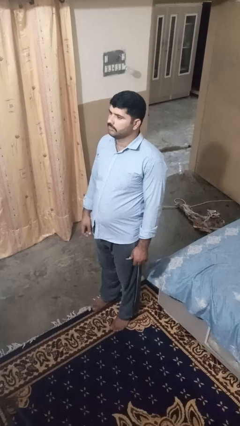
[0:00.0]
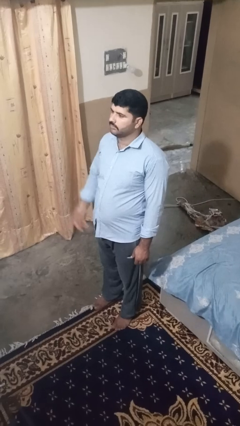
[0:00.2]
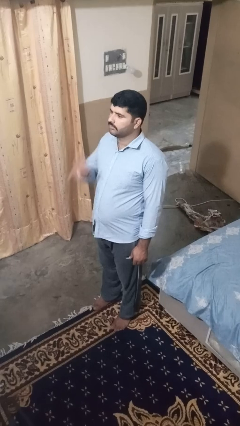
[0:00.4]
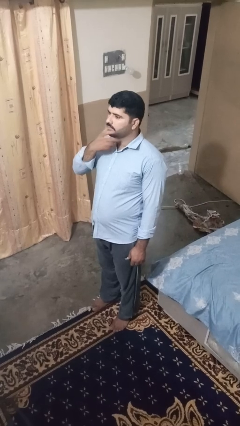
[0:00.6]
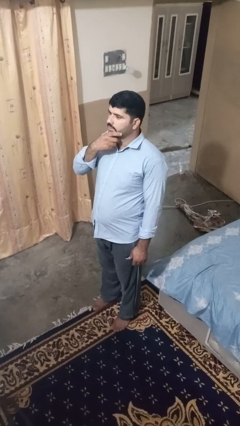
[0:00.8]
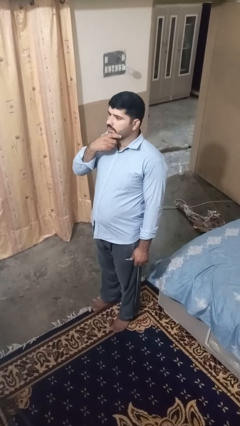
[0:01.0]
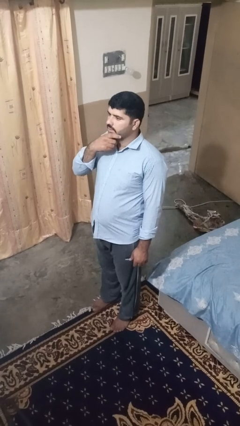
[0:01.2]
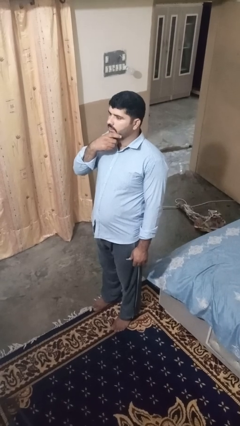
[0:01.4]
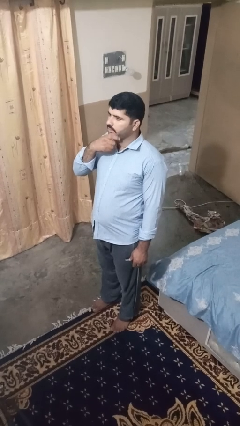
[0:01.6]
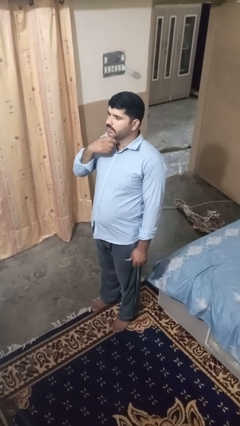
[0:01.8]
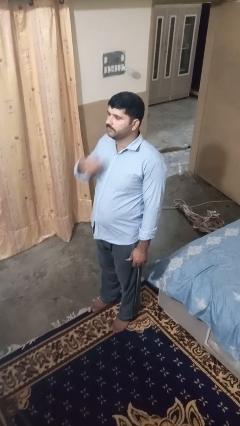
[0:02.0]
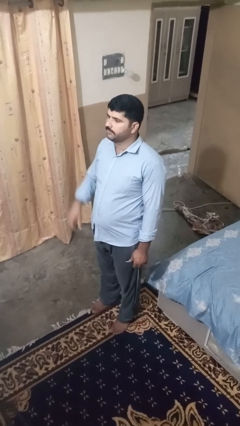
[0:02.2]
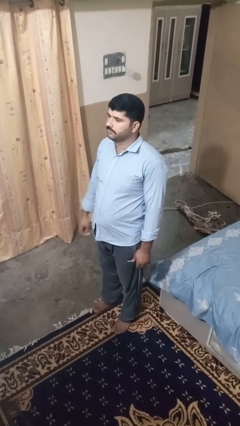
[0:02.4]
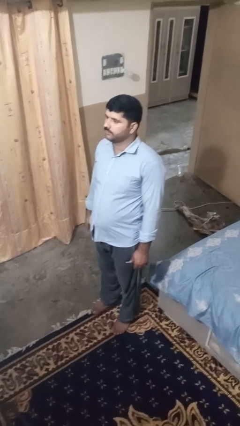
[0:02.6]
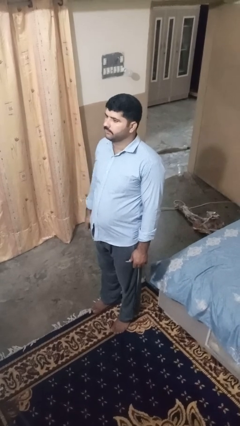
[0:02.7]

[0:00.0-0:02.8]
person strokes chin

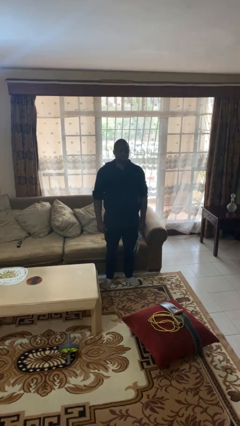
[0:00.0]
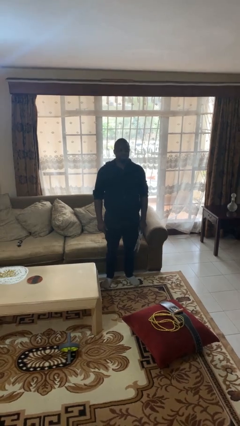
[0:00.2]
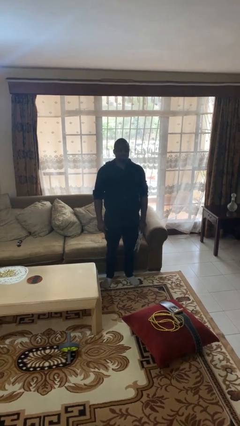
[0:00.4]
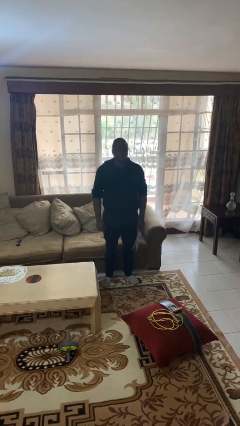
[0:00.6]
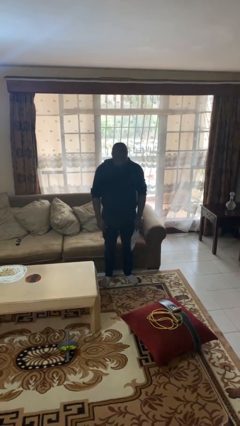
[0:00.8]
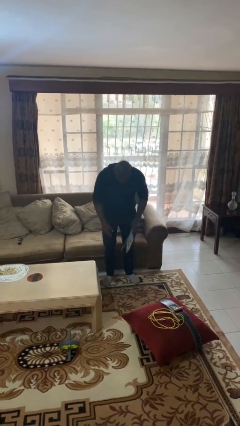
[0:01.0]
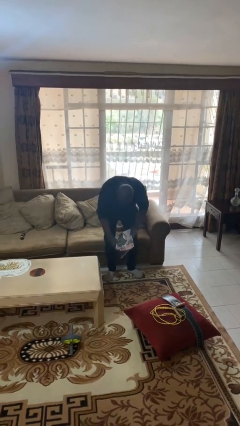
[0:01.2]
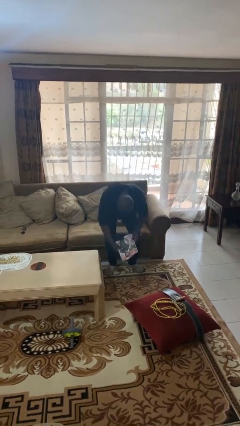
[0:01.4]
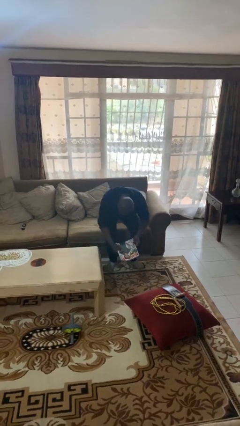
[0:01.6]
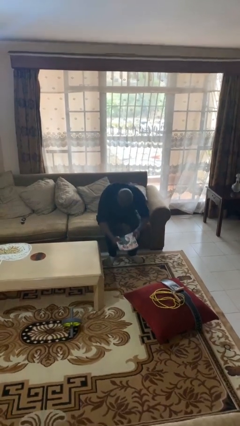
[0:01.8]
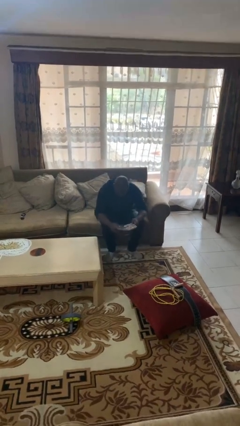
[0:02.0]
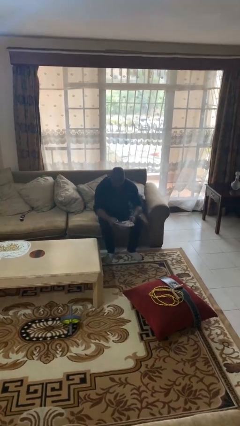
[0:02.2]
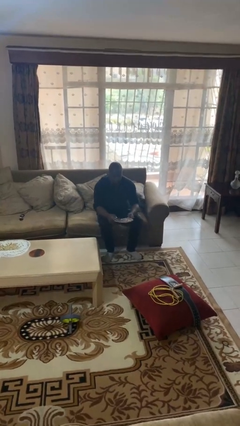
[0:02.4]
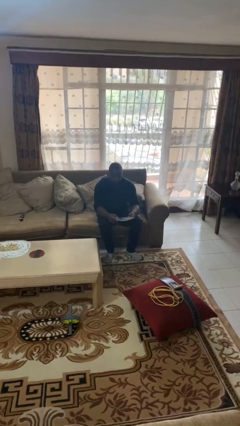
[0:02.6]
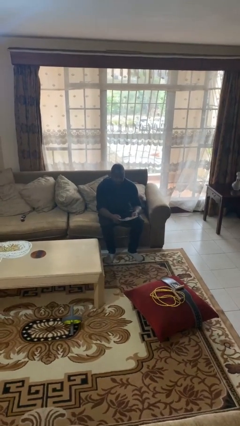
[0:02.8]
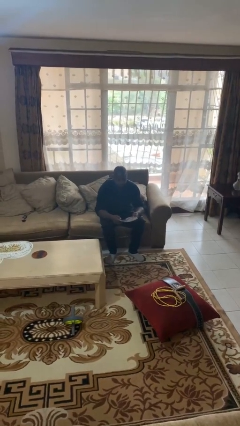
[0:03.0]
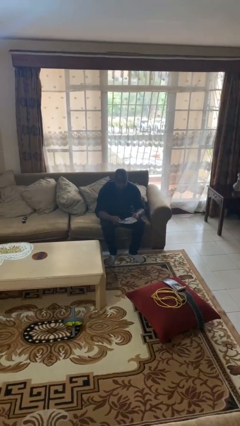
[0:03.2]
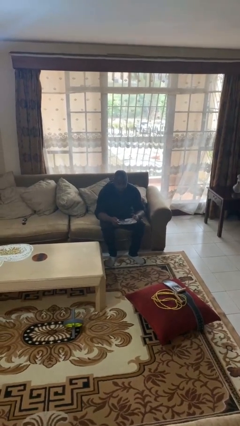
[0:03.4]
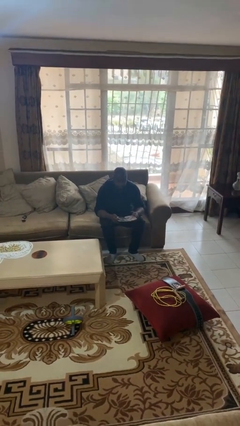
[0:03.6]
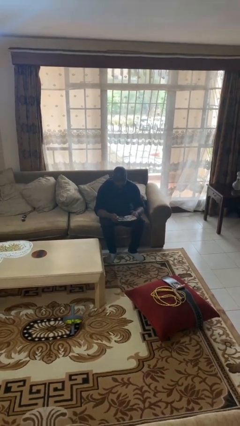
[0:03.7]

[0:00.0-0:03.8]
person sits down

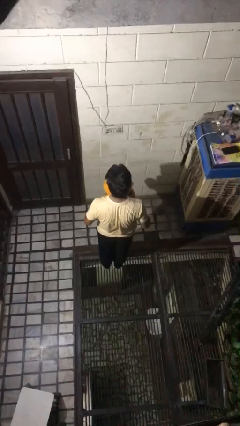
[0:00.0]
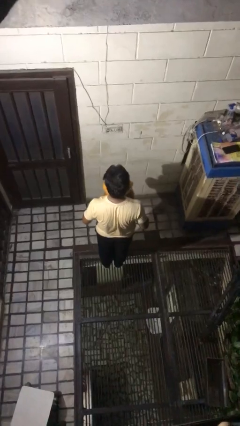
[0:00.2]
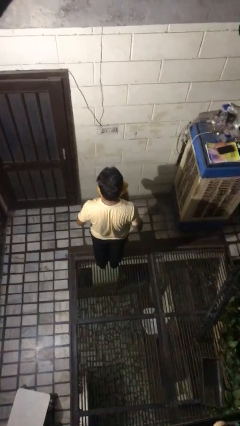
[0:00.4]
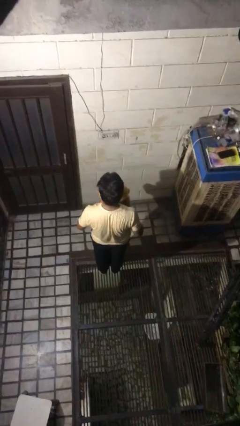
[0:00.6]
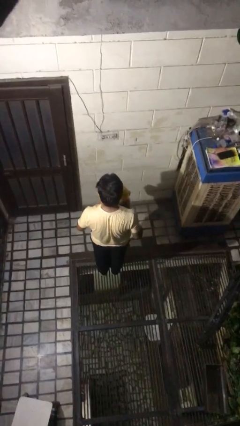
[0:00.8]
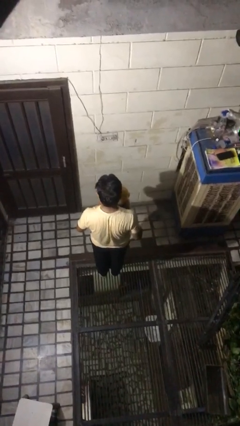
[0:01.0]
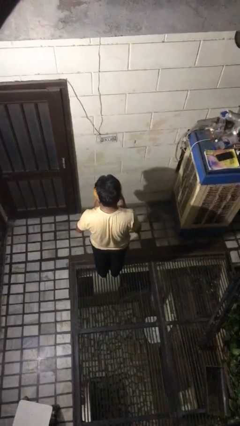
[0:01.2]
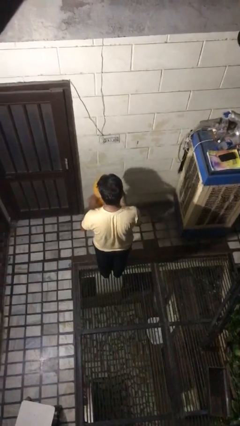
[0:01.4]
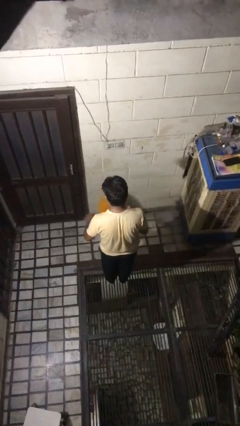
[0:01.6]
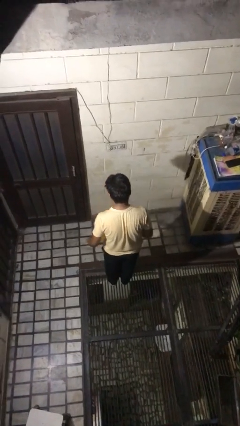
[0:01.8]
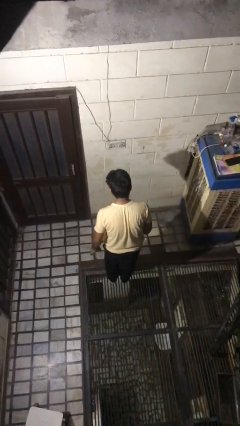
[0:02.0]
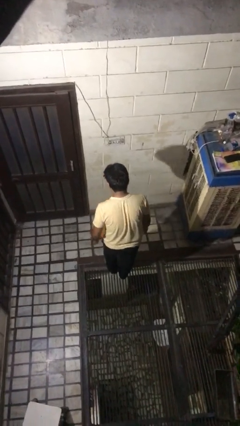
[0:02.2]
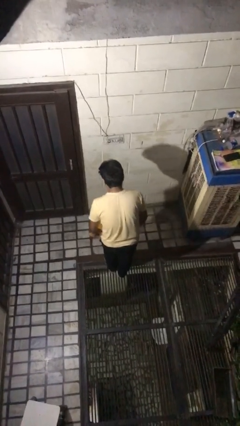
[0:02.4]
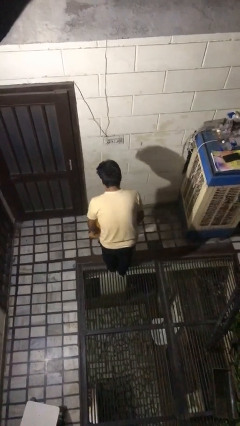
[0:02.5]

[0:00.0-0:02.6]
person throws object into air

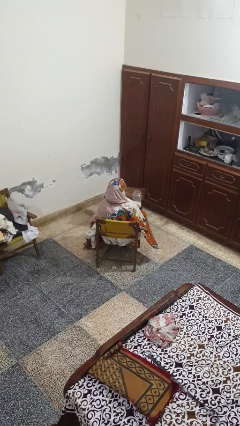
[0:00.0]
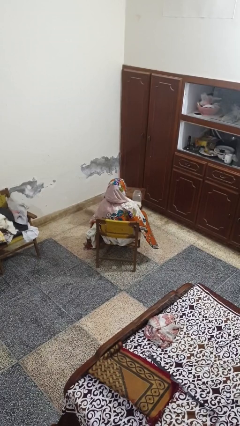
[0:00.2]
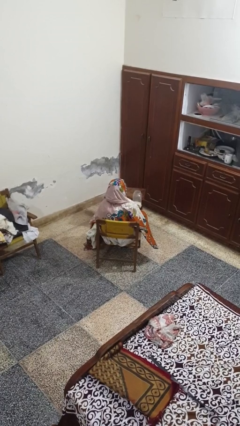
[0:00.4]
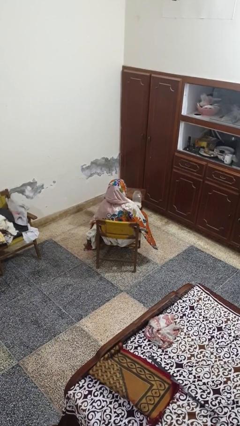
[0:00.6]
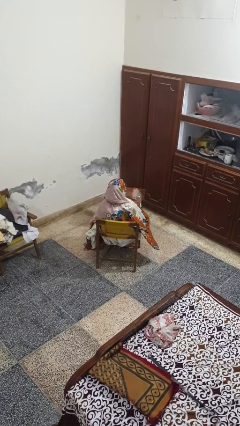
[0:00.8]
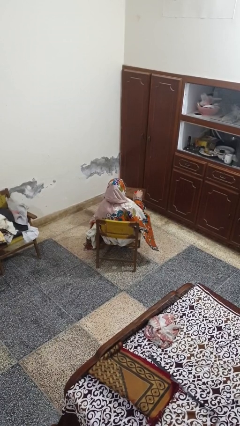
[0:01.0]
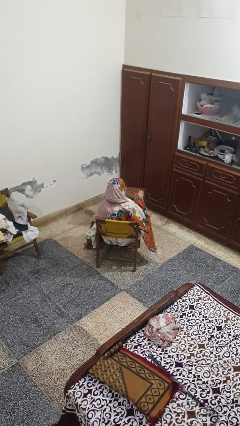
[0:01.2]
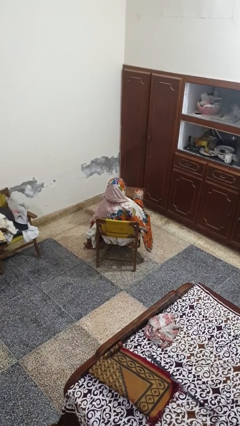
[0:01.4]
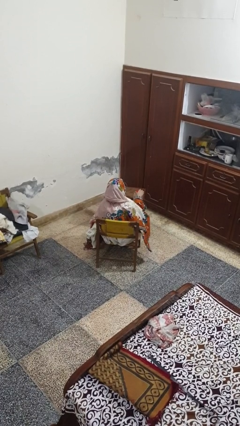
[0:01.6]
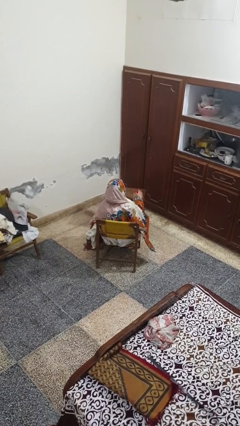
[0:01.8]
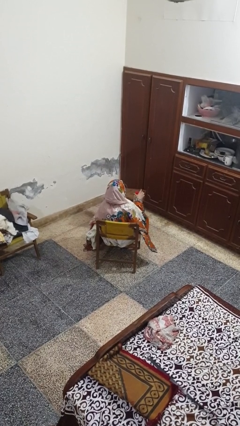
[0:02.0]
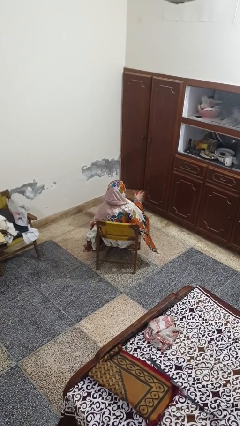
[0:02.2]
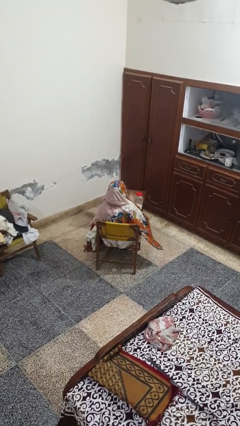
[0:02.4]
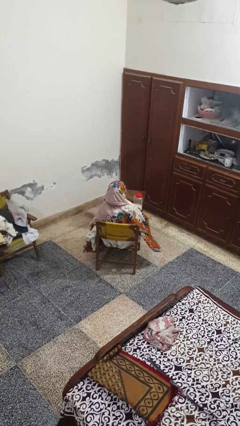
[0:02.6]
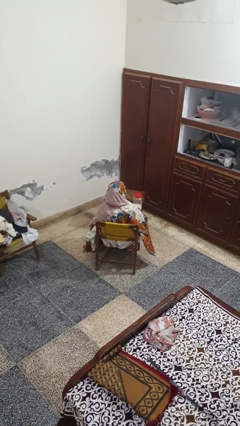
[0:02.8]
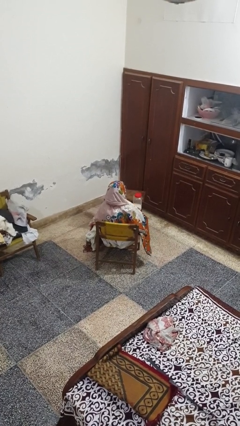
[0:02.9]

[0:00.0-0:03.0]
person closes jar

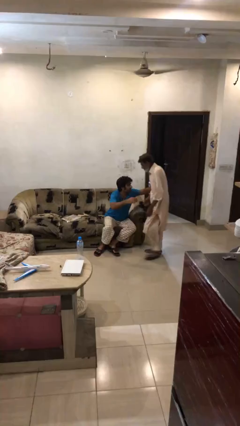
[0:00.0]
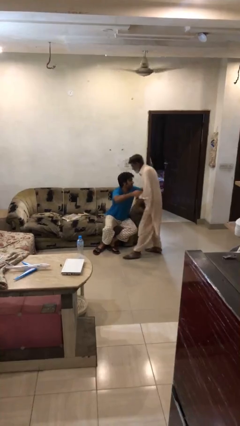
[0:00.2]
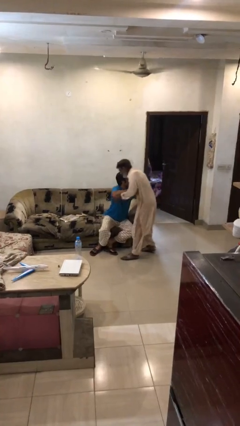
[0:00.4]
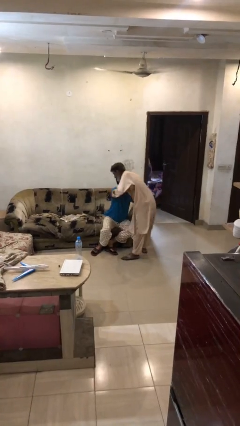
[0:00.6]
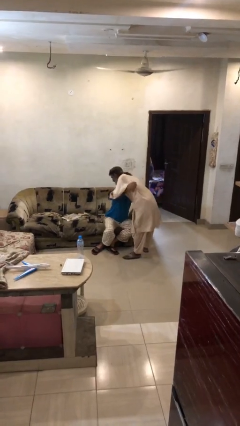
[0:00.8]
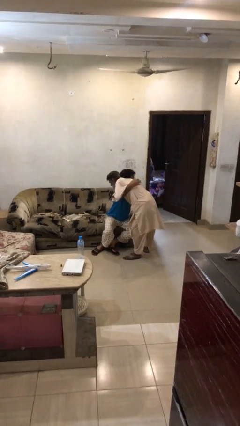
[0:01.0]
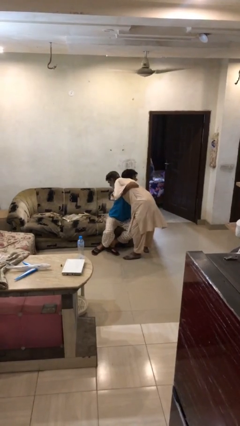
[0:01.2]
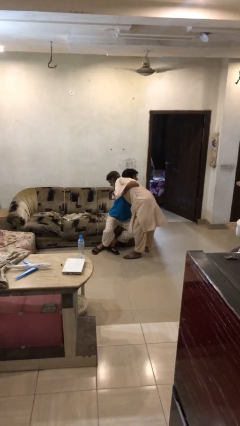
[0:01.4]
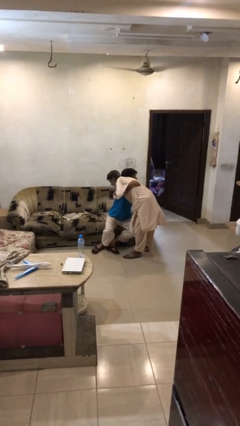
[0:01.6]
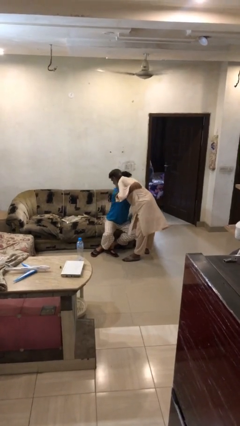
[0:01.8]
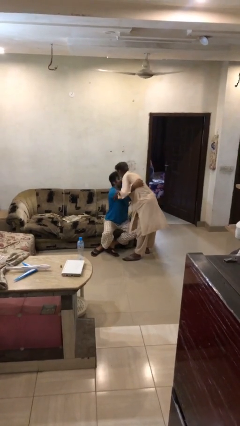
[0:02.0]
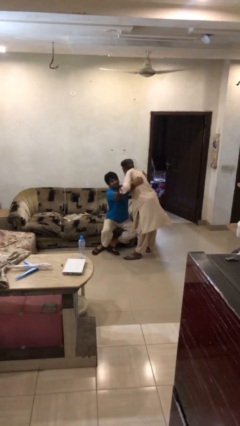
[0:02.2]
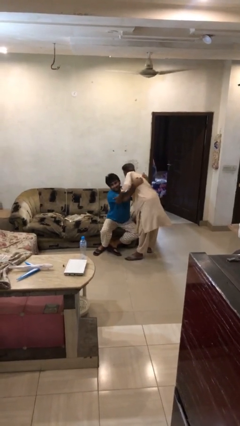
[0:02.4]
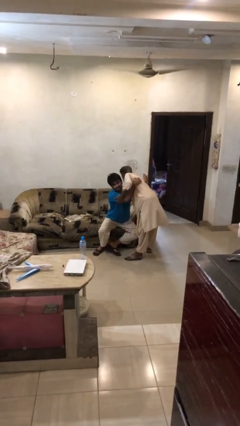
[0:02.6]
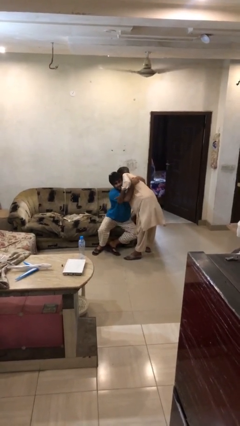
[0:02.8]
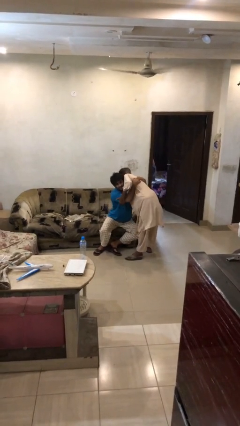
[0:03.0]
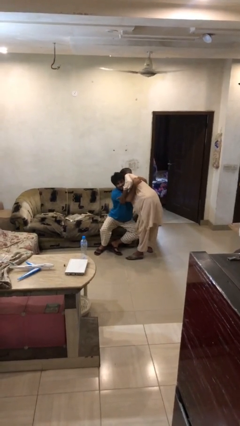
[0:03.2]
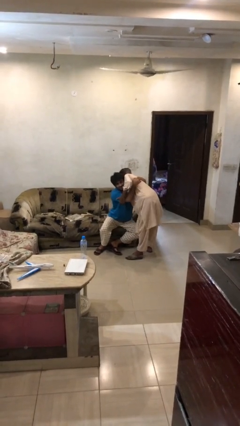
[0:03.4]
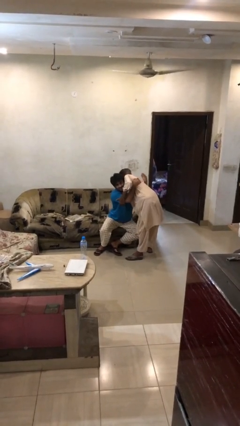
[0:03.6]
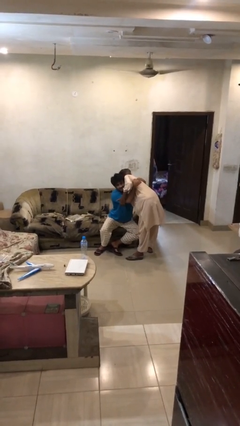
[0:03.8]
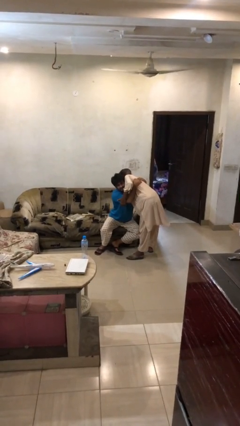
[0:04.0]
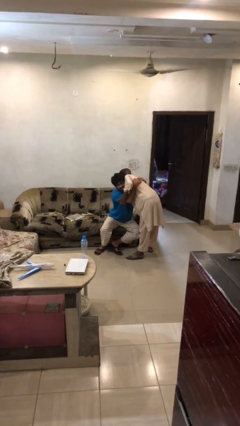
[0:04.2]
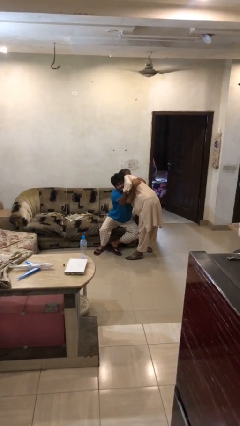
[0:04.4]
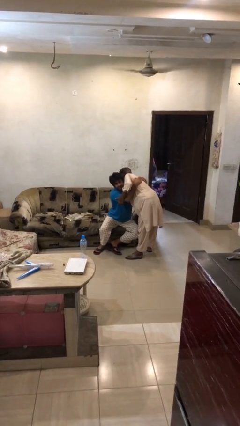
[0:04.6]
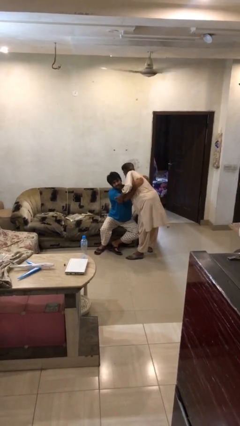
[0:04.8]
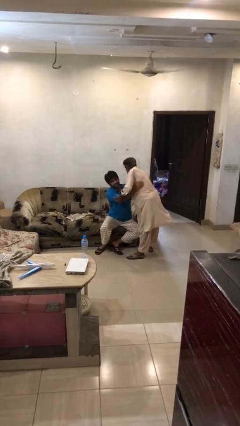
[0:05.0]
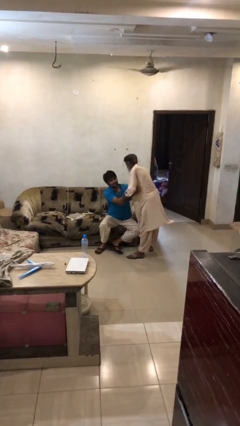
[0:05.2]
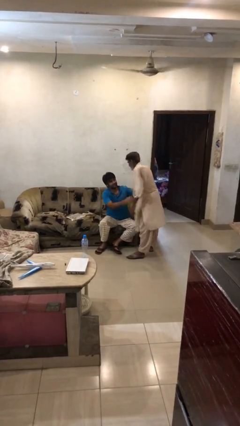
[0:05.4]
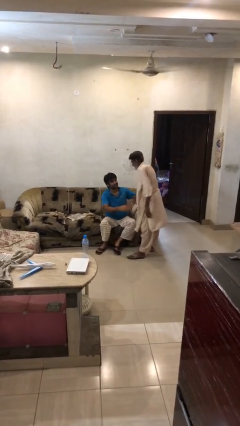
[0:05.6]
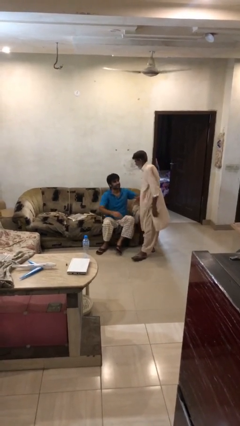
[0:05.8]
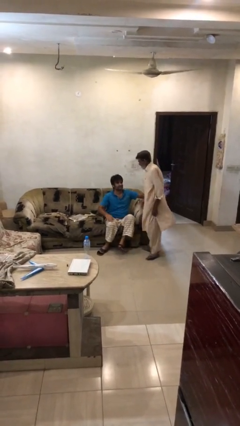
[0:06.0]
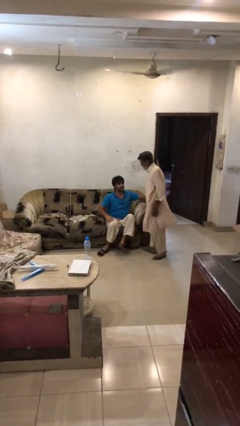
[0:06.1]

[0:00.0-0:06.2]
person embraces person
